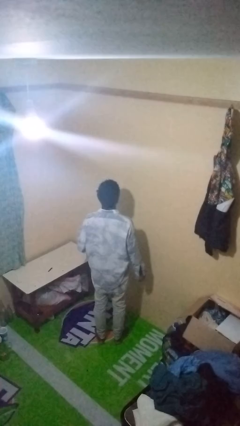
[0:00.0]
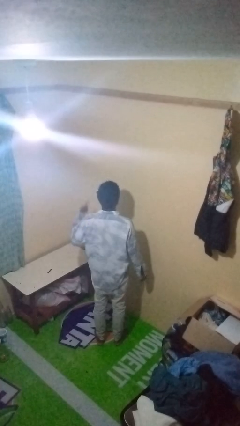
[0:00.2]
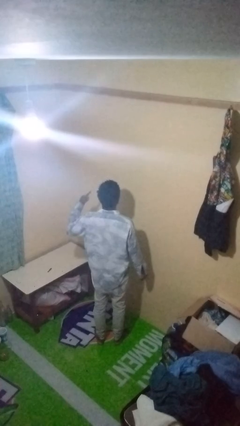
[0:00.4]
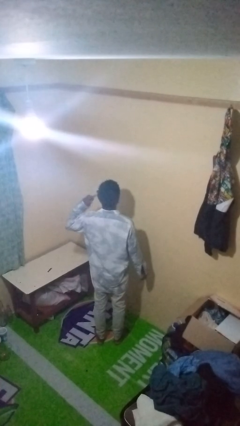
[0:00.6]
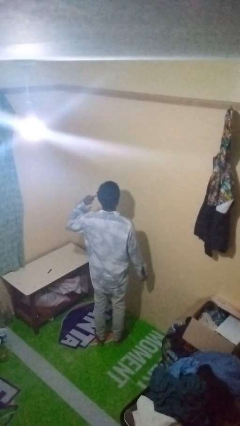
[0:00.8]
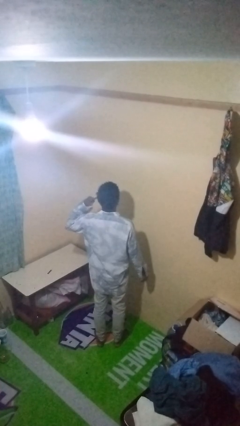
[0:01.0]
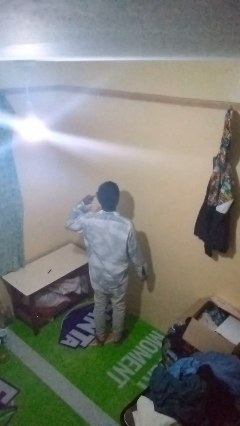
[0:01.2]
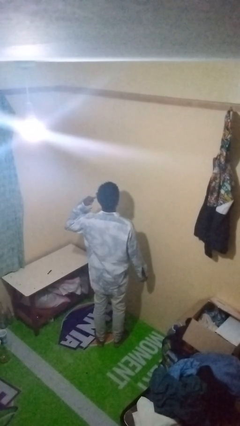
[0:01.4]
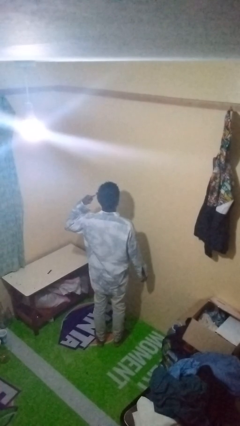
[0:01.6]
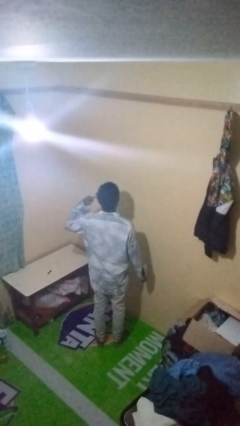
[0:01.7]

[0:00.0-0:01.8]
person gestures listen closely

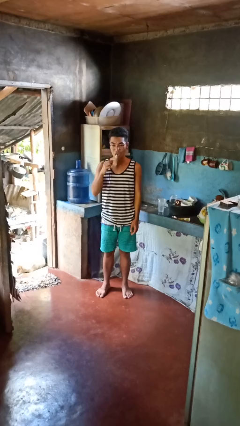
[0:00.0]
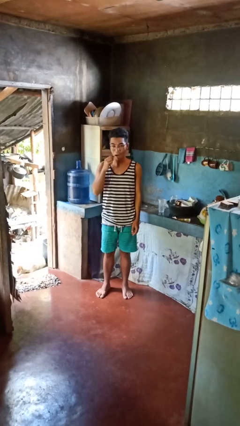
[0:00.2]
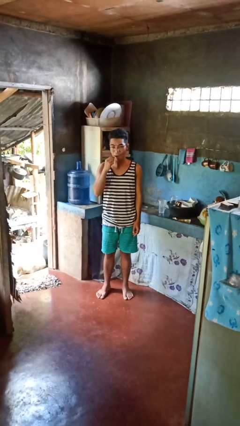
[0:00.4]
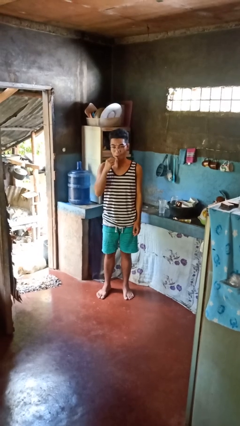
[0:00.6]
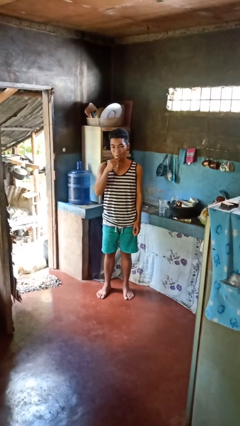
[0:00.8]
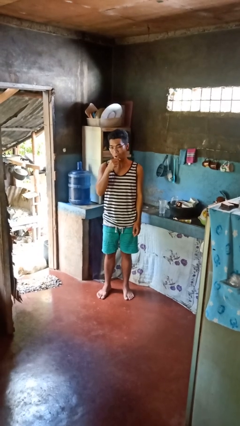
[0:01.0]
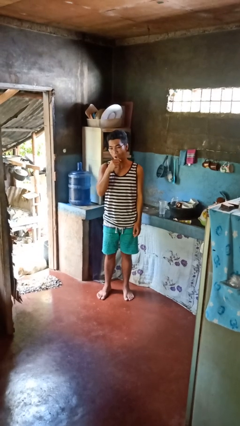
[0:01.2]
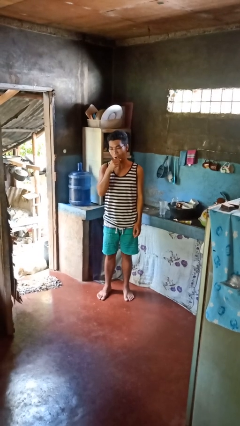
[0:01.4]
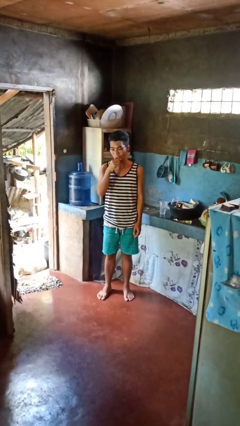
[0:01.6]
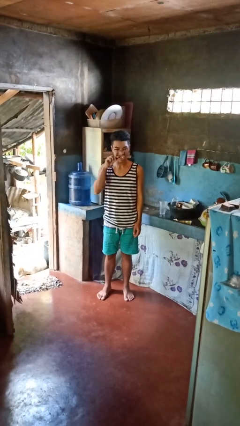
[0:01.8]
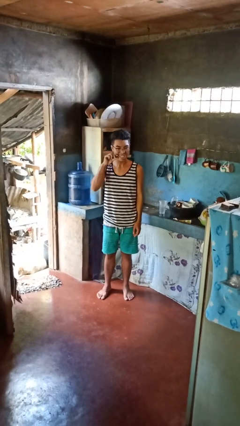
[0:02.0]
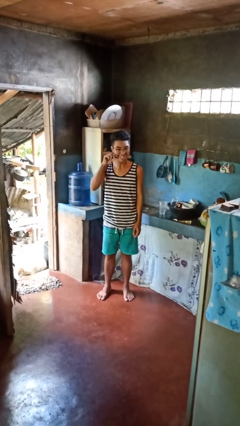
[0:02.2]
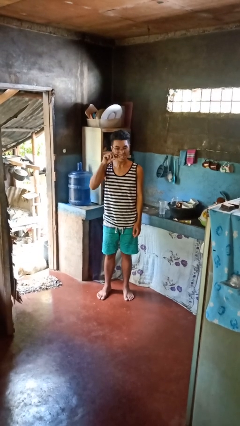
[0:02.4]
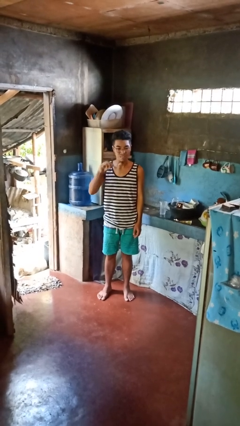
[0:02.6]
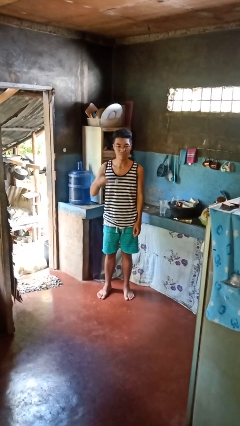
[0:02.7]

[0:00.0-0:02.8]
person brushes teeth

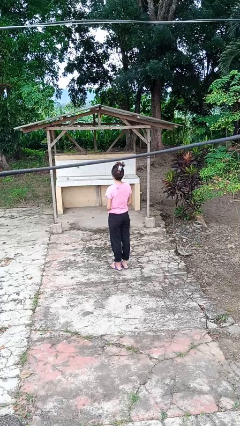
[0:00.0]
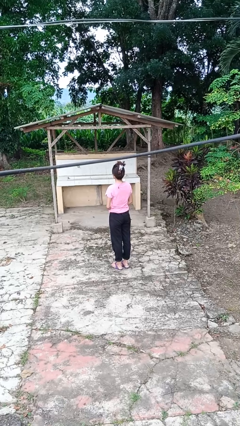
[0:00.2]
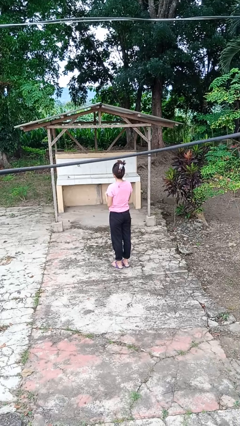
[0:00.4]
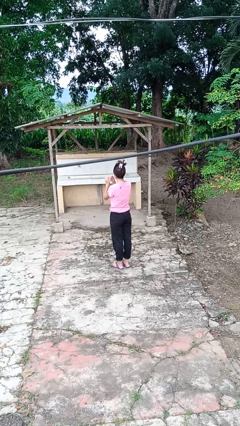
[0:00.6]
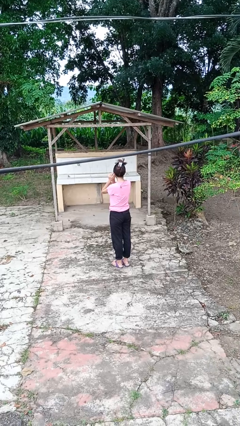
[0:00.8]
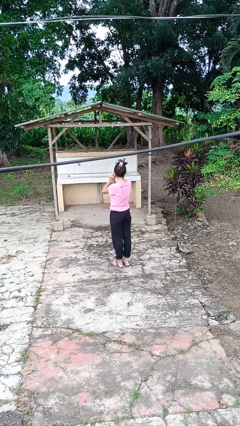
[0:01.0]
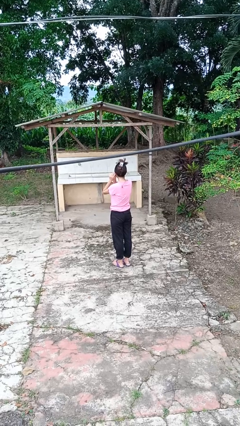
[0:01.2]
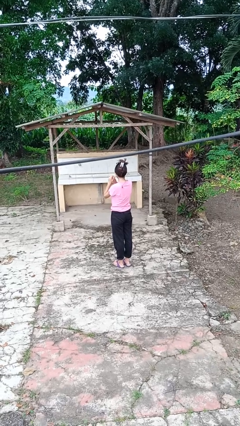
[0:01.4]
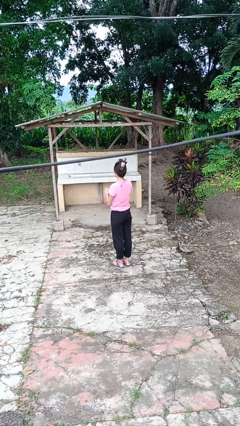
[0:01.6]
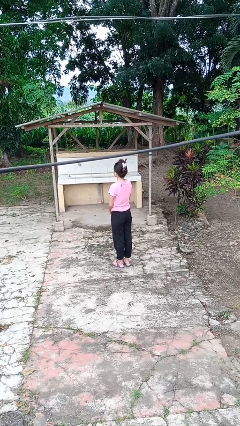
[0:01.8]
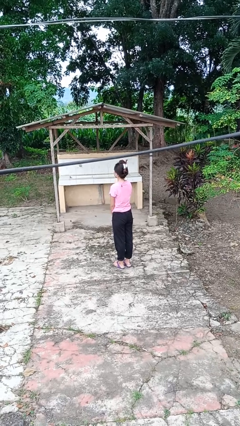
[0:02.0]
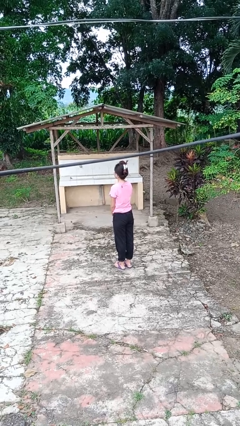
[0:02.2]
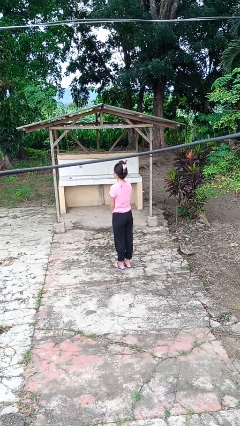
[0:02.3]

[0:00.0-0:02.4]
person takes off earrings

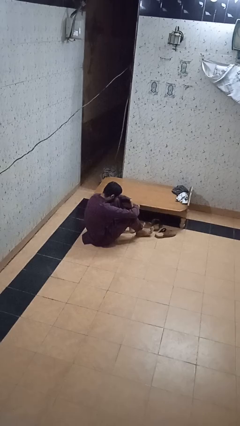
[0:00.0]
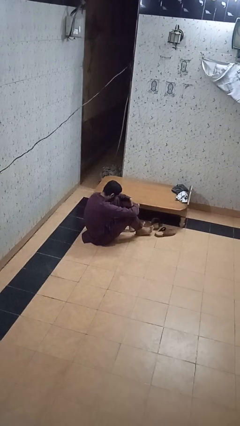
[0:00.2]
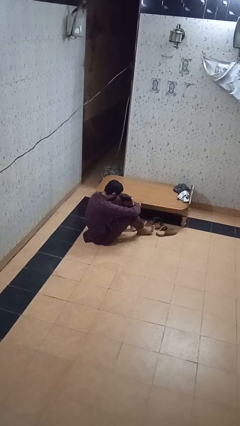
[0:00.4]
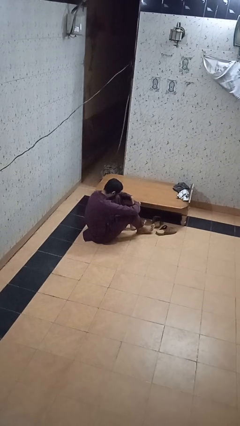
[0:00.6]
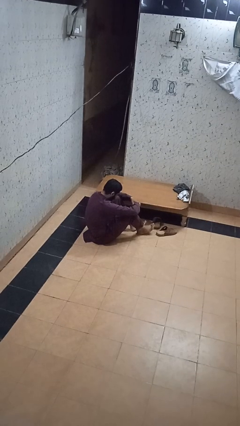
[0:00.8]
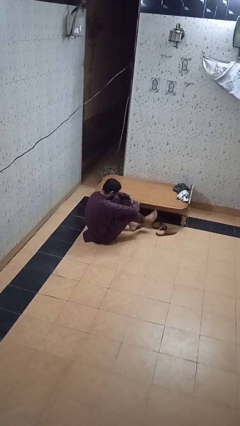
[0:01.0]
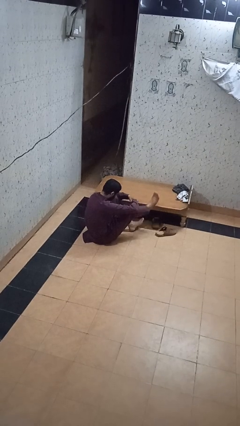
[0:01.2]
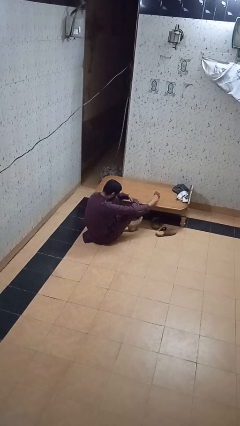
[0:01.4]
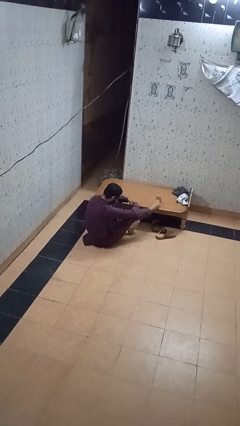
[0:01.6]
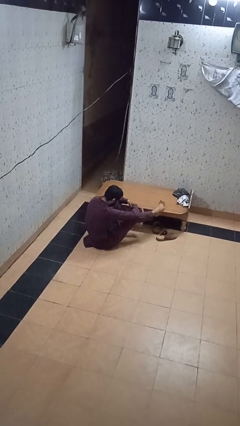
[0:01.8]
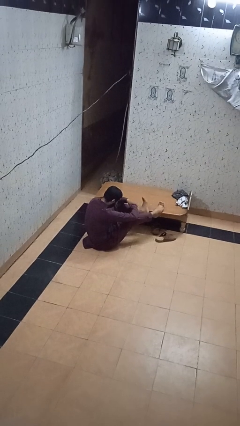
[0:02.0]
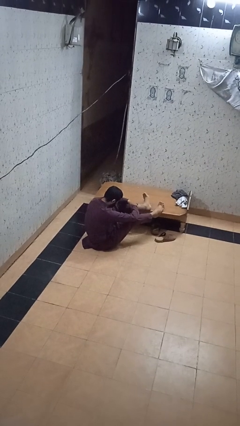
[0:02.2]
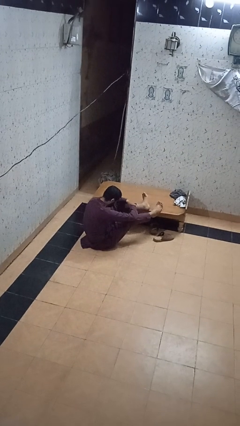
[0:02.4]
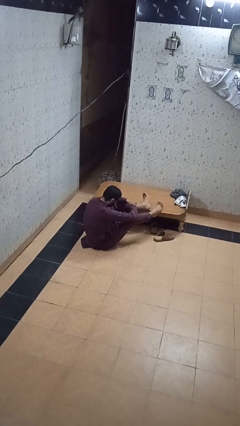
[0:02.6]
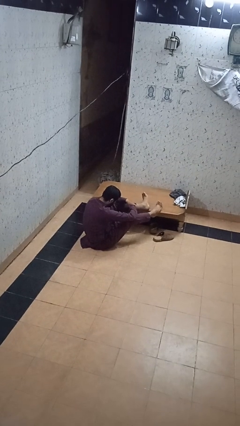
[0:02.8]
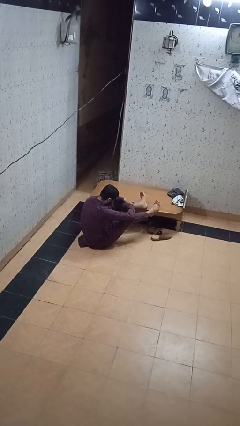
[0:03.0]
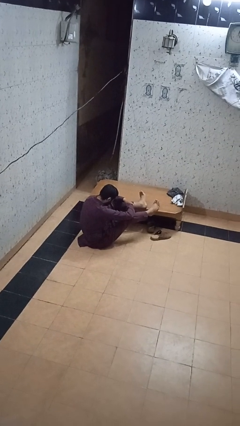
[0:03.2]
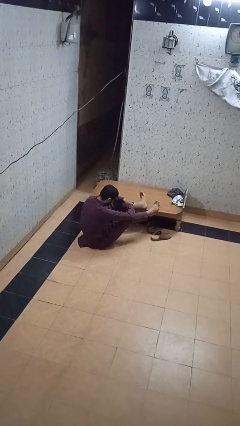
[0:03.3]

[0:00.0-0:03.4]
person puts feet up

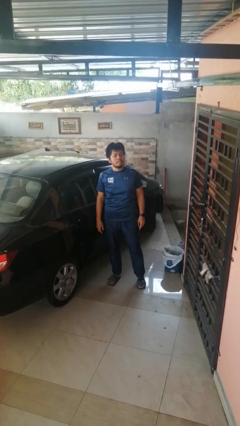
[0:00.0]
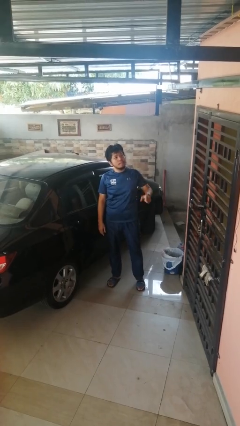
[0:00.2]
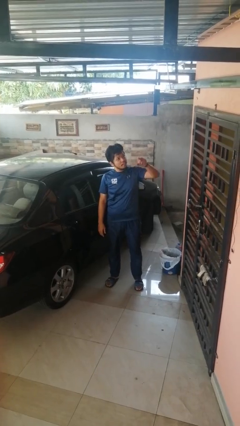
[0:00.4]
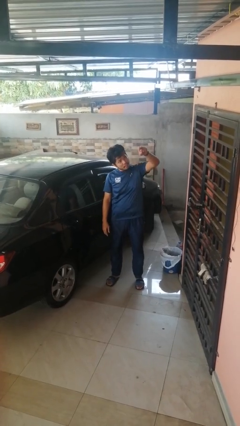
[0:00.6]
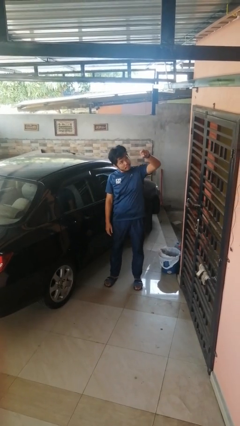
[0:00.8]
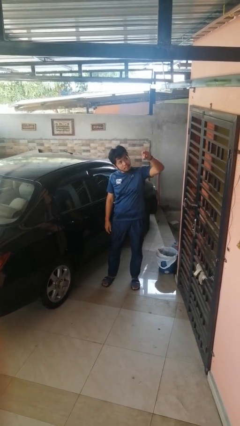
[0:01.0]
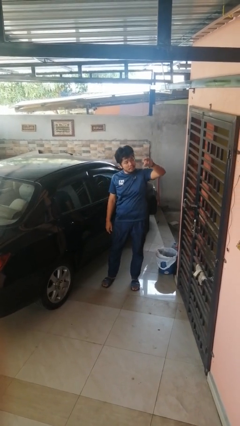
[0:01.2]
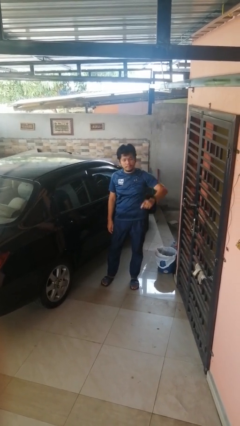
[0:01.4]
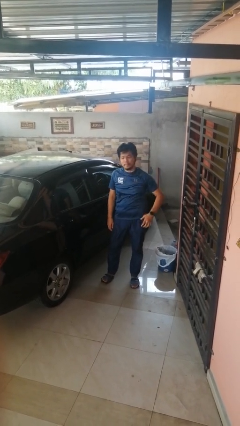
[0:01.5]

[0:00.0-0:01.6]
person points at person

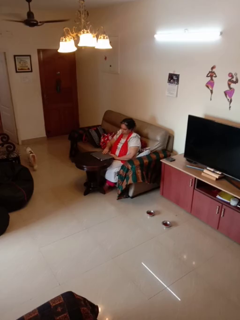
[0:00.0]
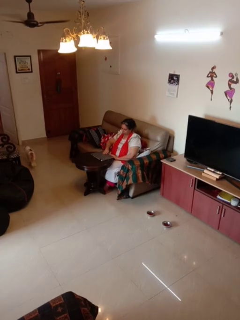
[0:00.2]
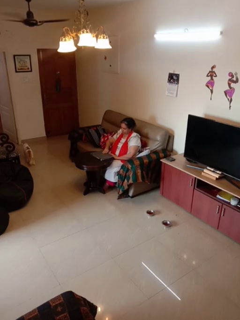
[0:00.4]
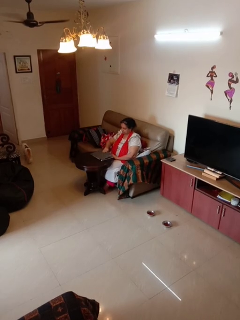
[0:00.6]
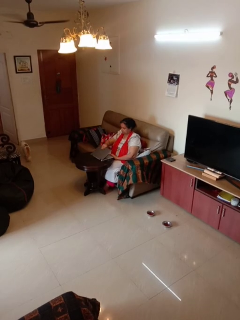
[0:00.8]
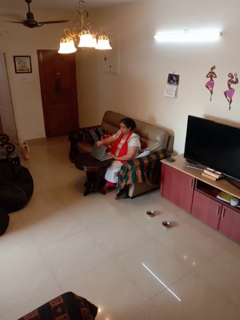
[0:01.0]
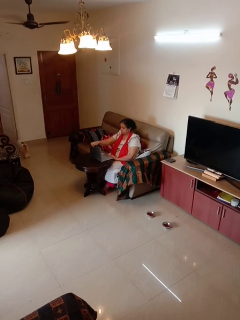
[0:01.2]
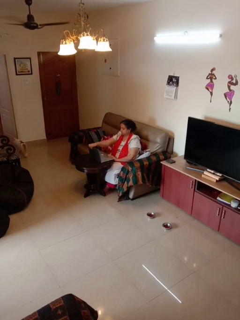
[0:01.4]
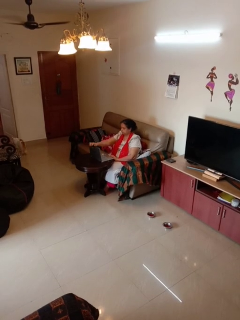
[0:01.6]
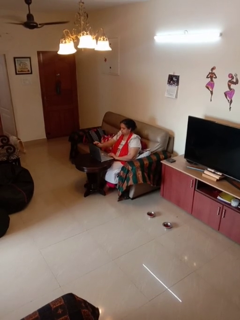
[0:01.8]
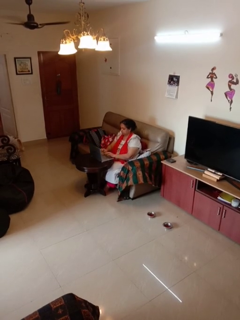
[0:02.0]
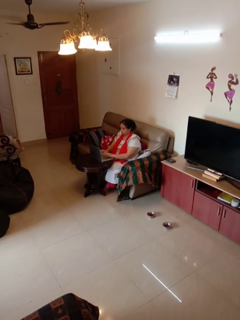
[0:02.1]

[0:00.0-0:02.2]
person opens laptop

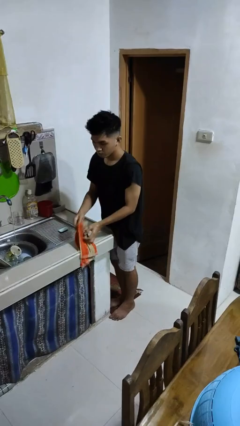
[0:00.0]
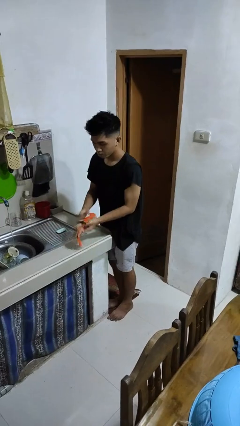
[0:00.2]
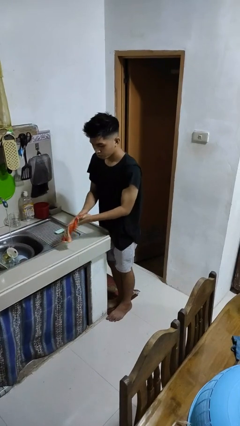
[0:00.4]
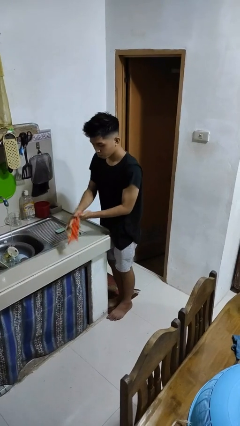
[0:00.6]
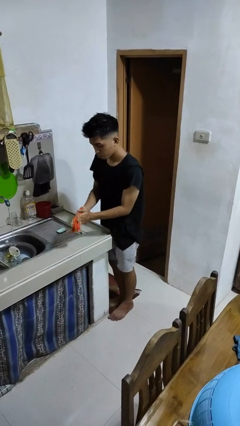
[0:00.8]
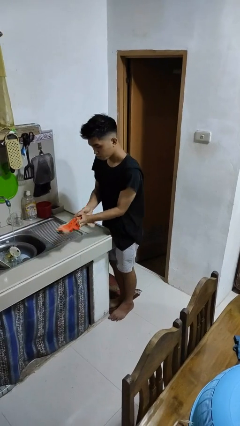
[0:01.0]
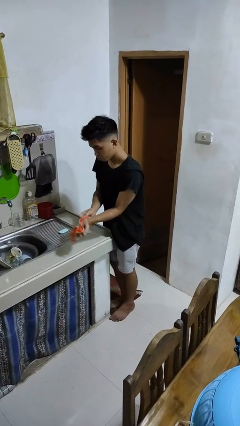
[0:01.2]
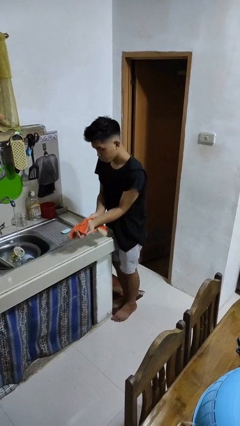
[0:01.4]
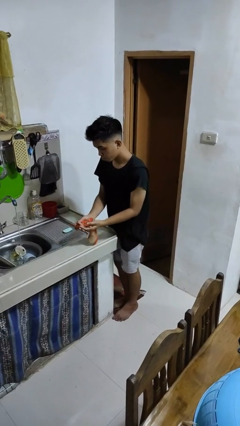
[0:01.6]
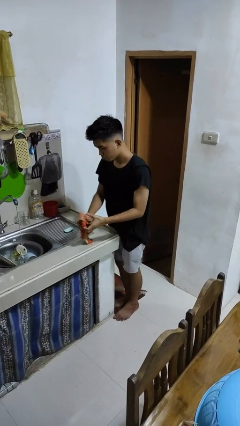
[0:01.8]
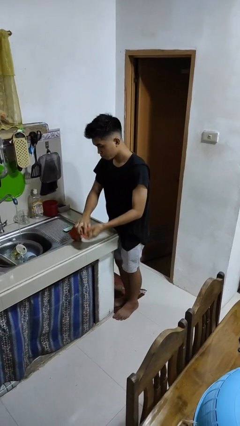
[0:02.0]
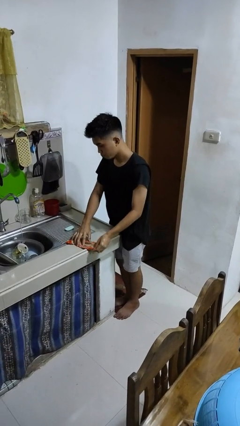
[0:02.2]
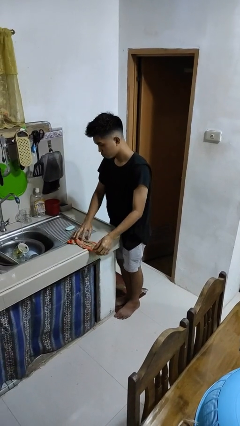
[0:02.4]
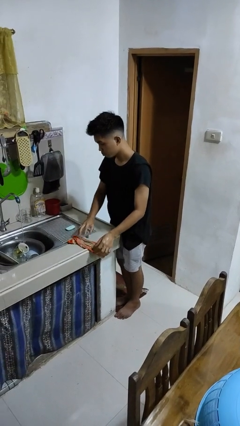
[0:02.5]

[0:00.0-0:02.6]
person dries hands with towel

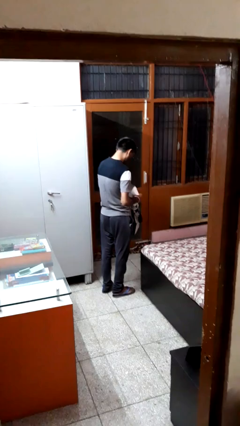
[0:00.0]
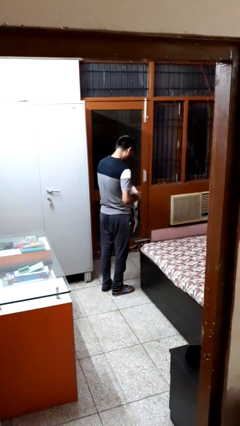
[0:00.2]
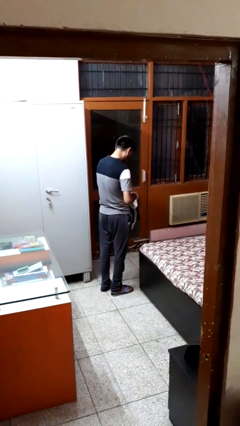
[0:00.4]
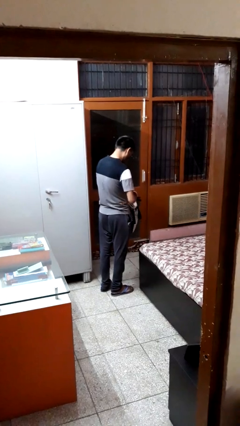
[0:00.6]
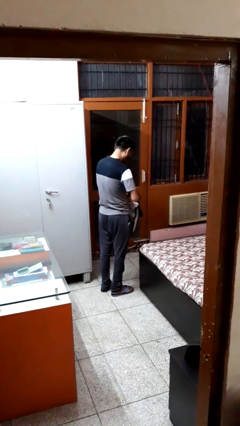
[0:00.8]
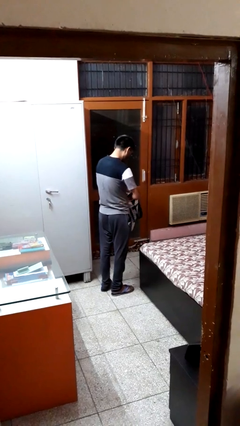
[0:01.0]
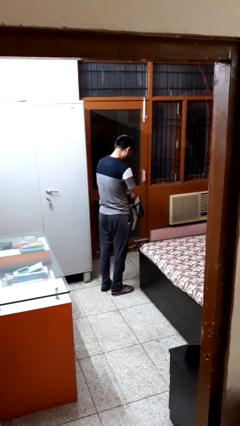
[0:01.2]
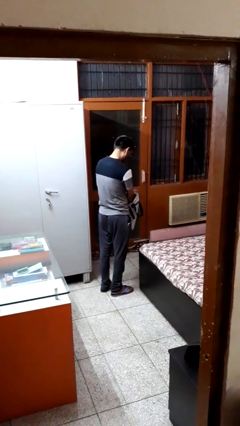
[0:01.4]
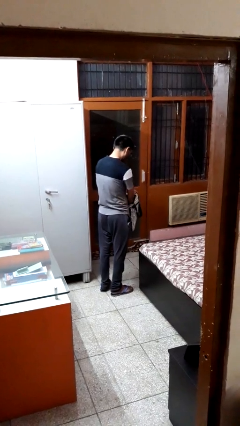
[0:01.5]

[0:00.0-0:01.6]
person puts object into bag
